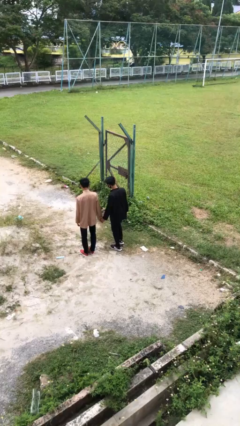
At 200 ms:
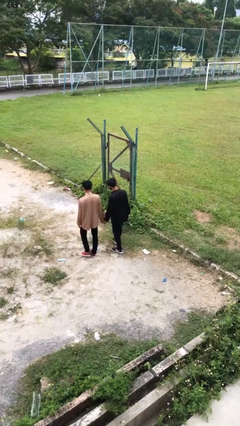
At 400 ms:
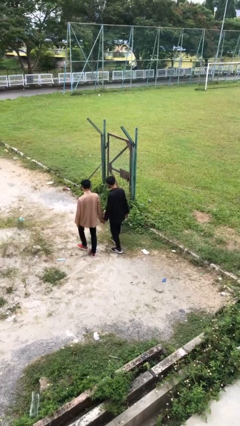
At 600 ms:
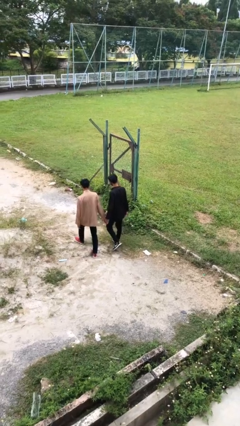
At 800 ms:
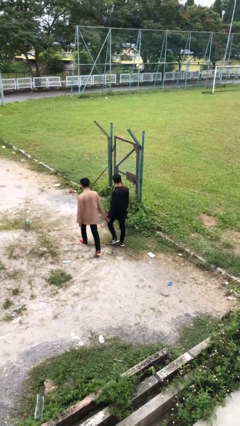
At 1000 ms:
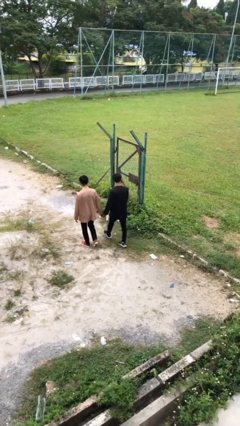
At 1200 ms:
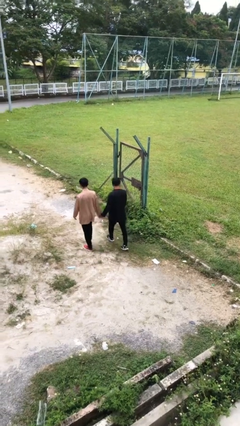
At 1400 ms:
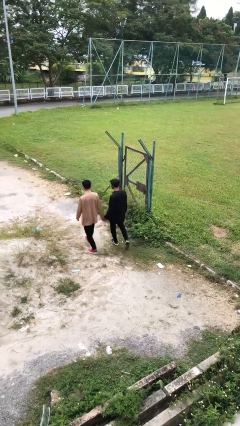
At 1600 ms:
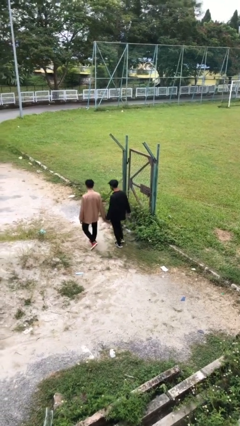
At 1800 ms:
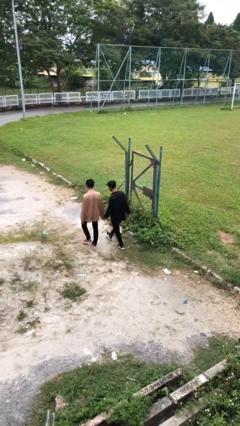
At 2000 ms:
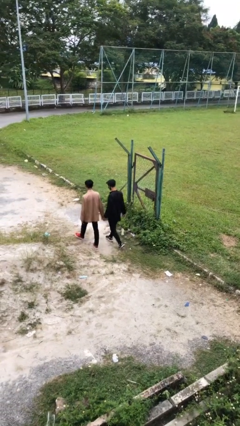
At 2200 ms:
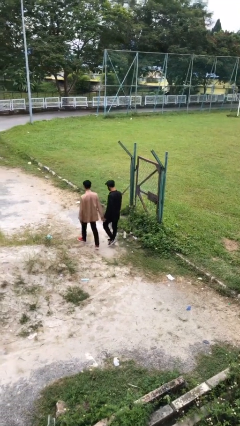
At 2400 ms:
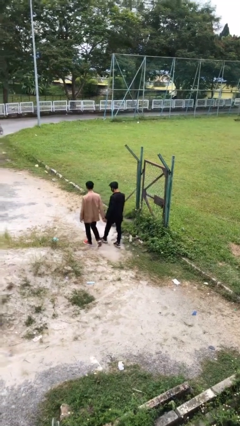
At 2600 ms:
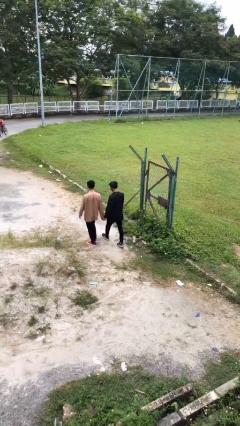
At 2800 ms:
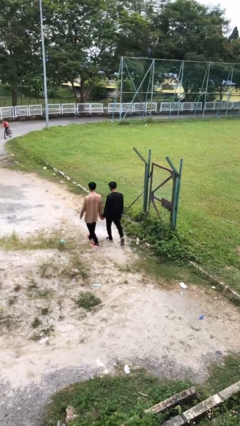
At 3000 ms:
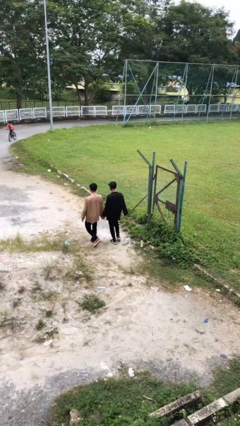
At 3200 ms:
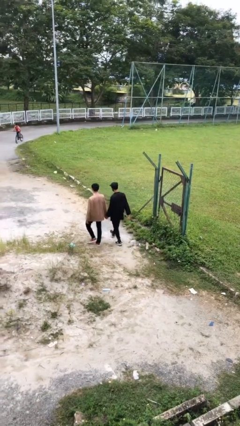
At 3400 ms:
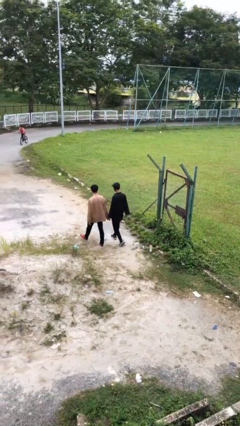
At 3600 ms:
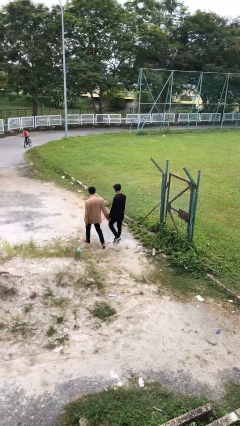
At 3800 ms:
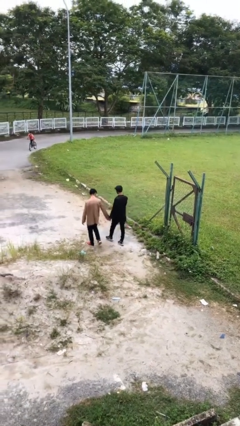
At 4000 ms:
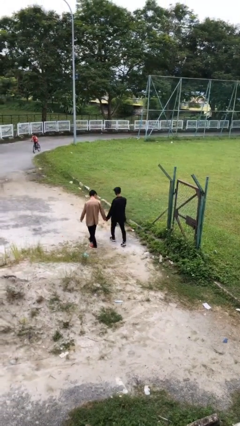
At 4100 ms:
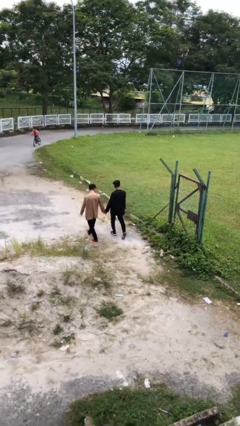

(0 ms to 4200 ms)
person talks to person

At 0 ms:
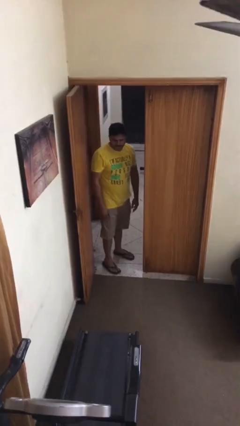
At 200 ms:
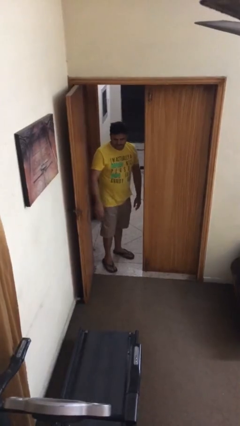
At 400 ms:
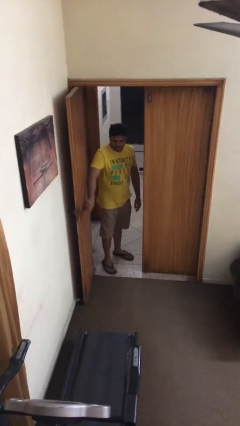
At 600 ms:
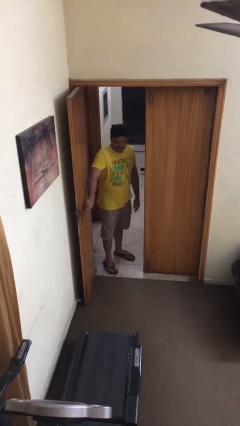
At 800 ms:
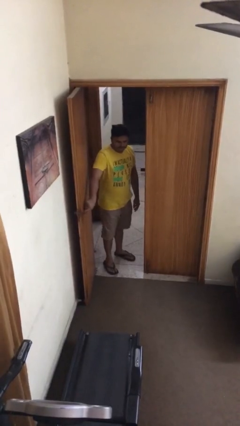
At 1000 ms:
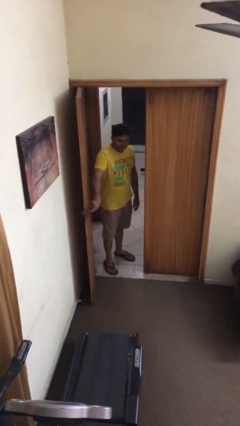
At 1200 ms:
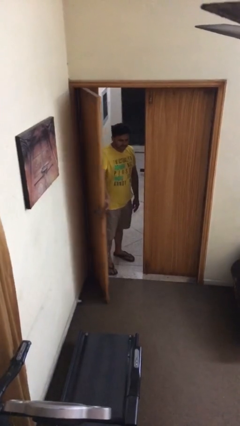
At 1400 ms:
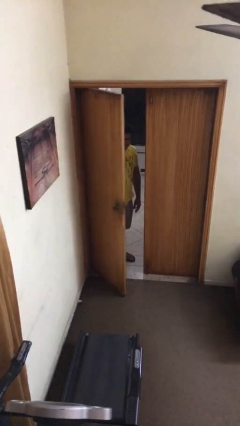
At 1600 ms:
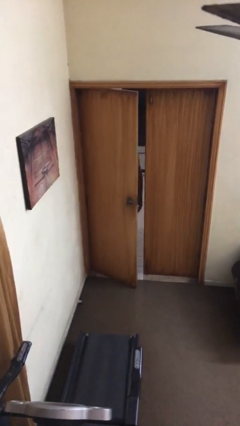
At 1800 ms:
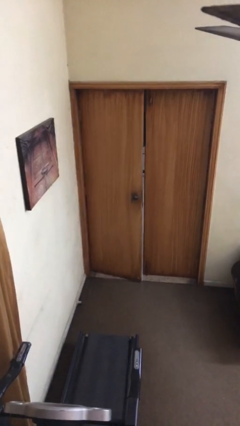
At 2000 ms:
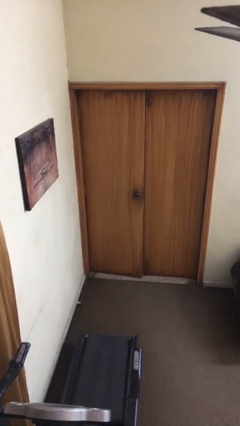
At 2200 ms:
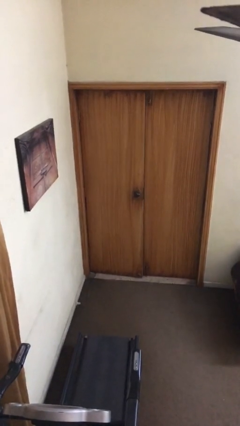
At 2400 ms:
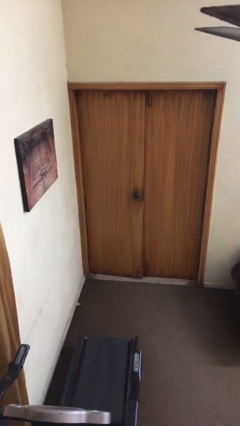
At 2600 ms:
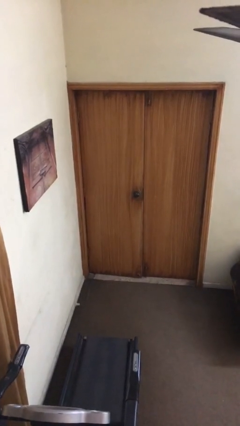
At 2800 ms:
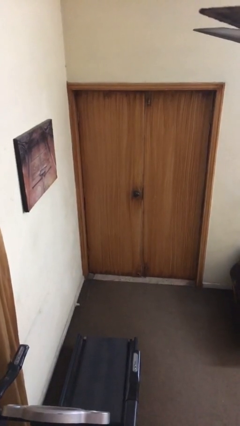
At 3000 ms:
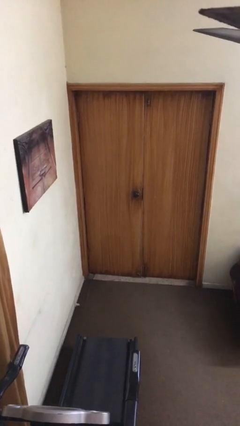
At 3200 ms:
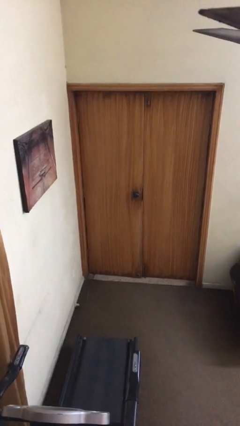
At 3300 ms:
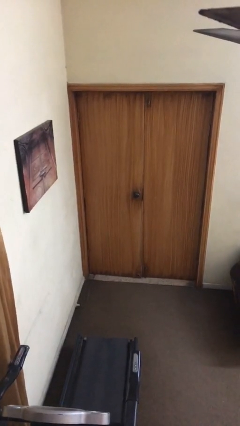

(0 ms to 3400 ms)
person closes facility door

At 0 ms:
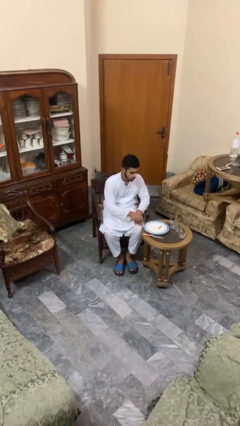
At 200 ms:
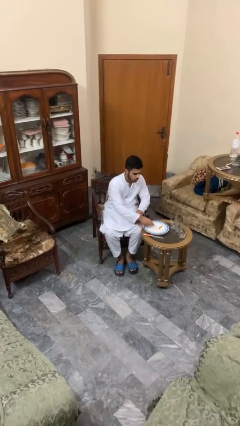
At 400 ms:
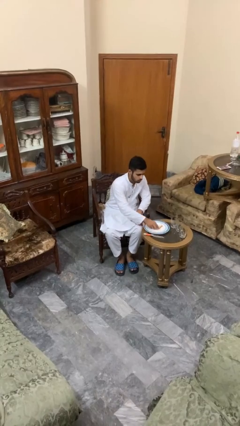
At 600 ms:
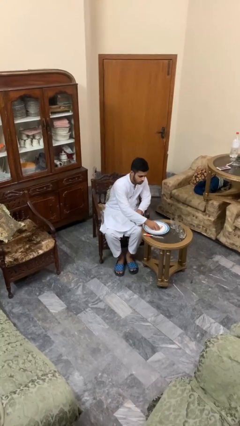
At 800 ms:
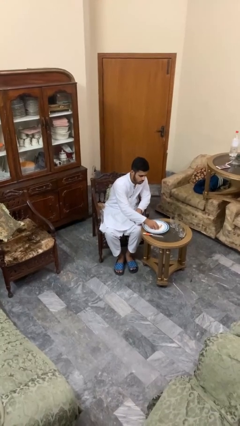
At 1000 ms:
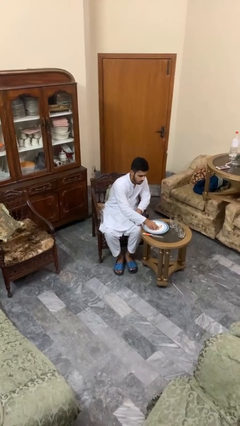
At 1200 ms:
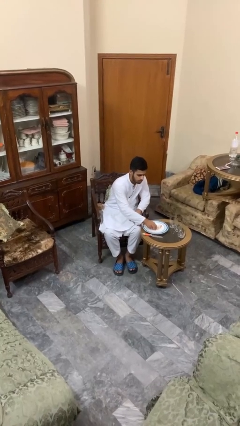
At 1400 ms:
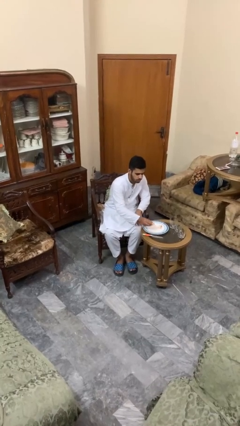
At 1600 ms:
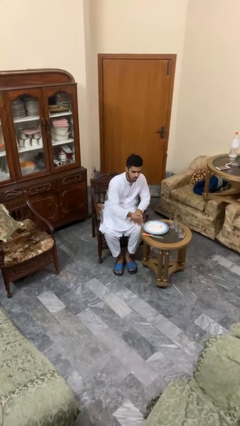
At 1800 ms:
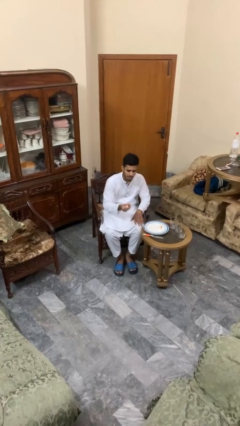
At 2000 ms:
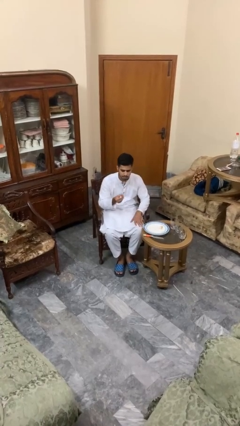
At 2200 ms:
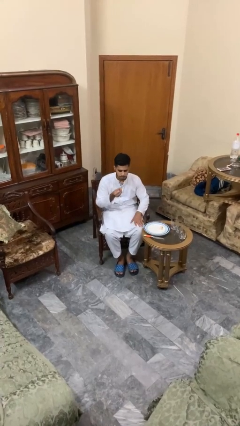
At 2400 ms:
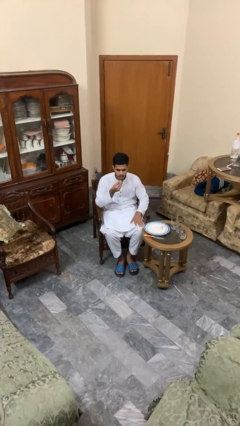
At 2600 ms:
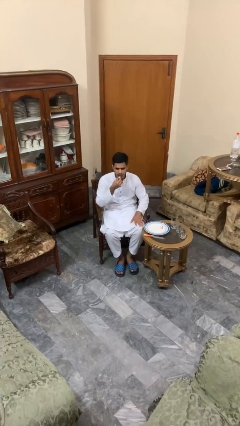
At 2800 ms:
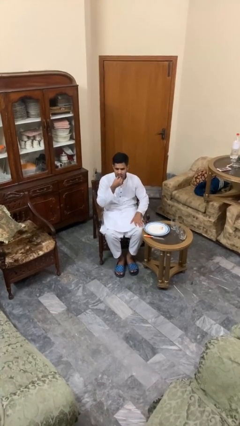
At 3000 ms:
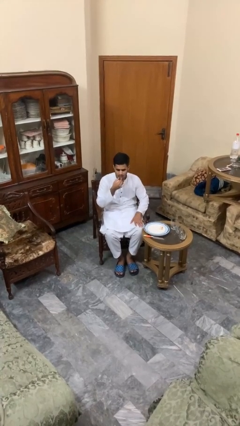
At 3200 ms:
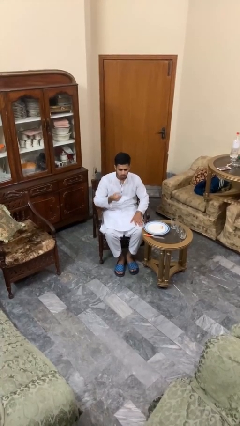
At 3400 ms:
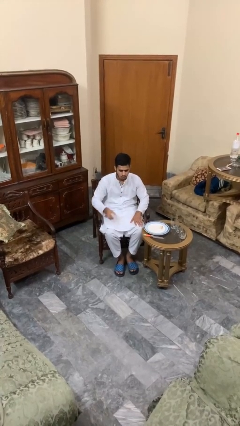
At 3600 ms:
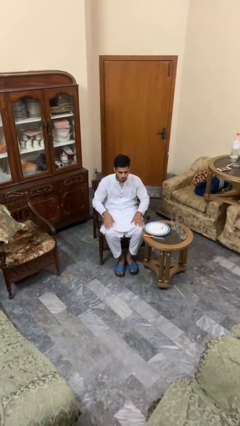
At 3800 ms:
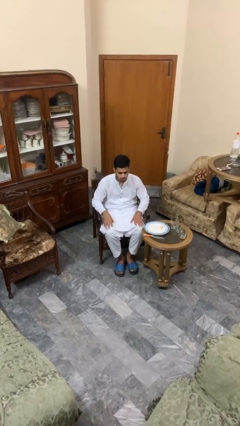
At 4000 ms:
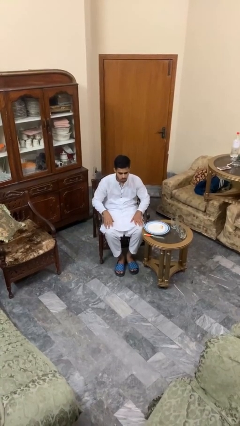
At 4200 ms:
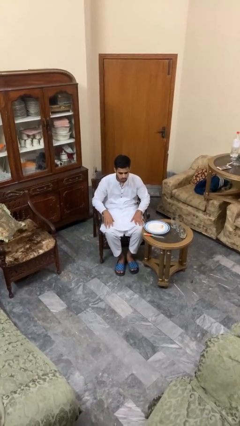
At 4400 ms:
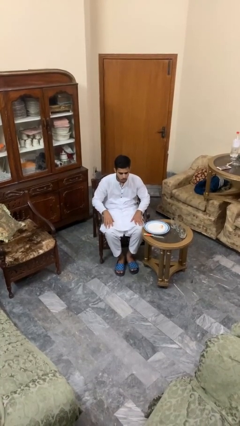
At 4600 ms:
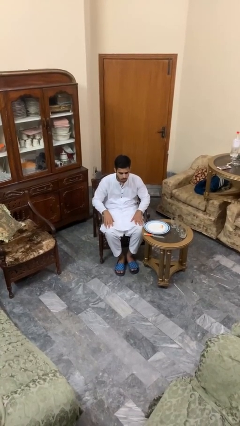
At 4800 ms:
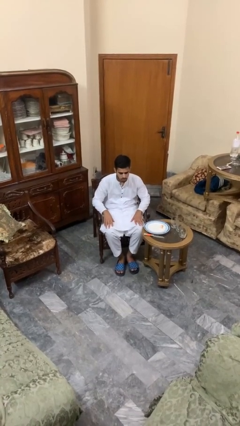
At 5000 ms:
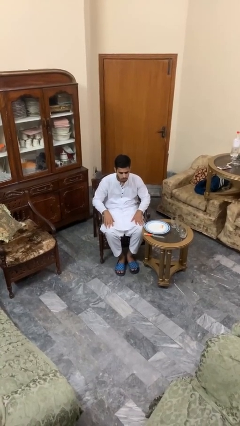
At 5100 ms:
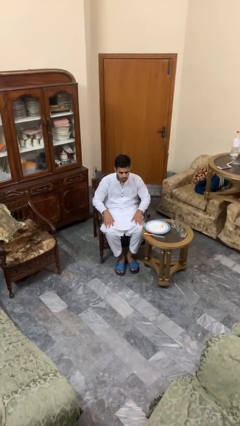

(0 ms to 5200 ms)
person eats with hands

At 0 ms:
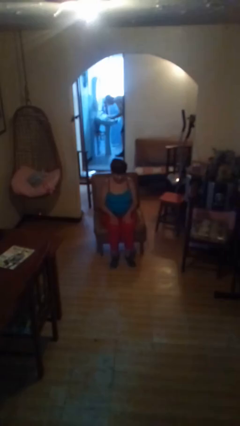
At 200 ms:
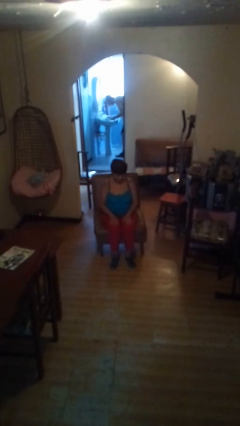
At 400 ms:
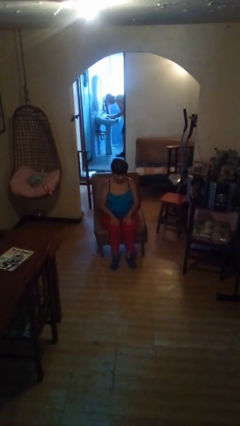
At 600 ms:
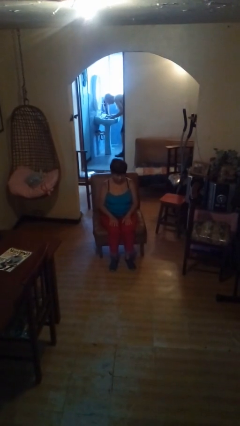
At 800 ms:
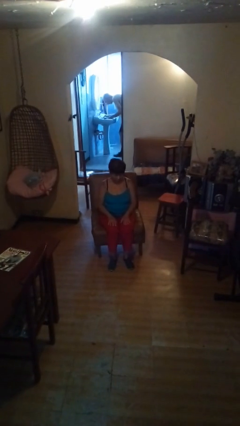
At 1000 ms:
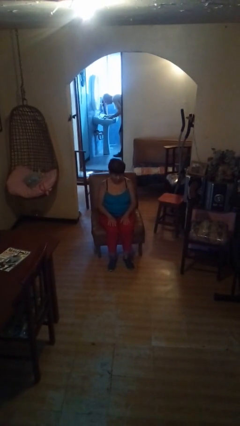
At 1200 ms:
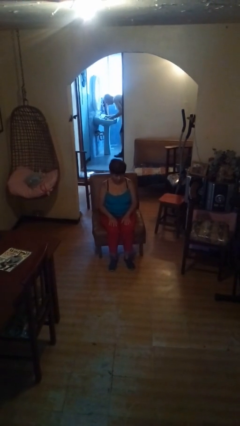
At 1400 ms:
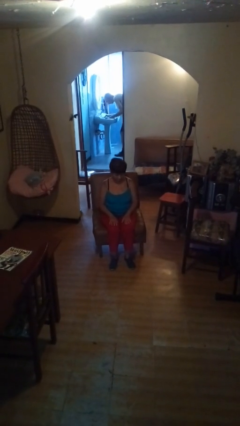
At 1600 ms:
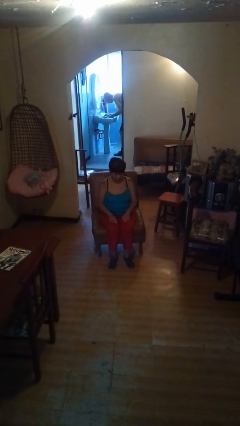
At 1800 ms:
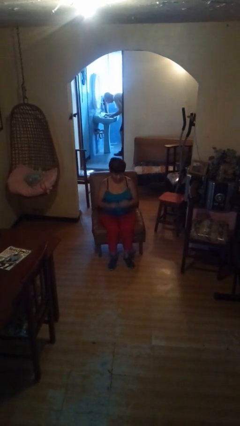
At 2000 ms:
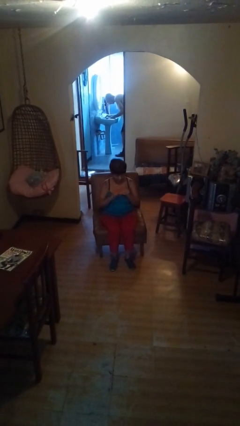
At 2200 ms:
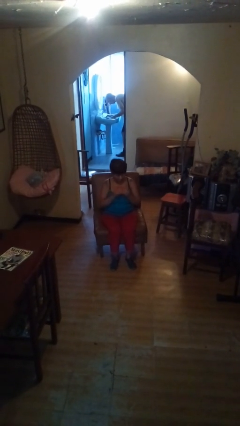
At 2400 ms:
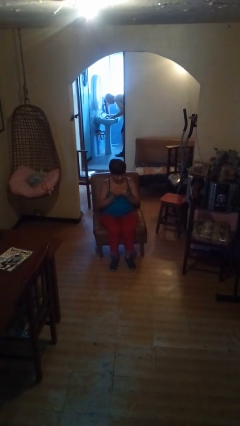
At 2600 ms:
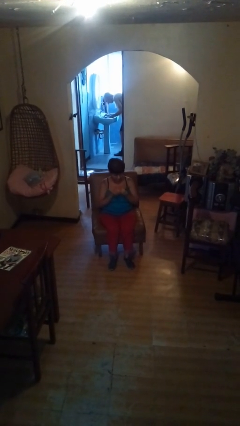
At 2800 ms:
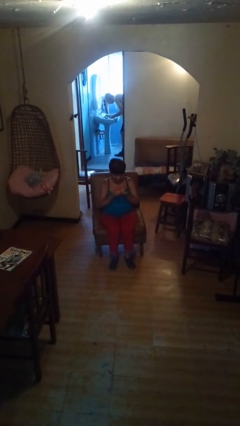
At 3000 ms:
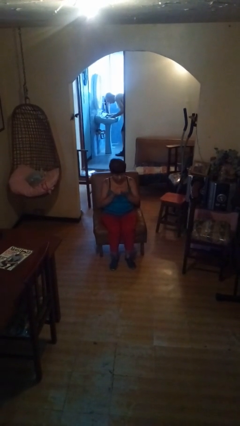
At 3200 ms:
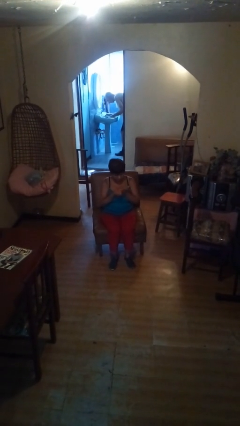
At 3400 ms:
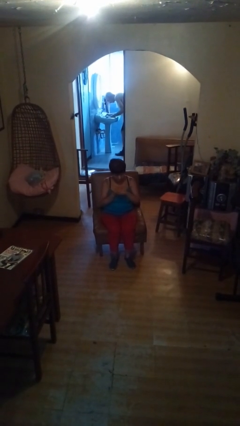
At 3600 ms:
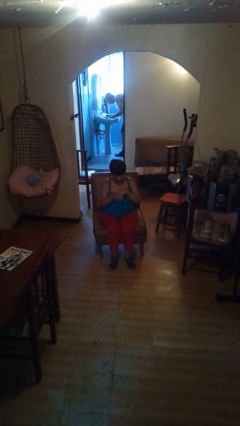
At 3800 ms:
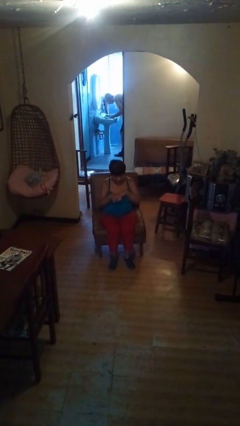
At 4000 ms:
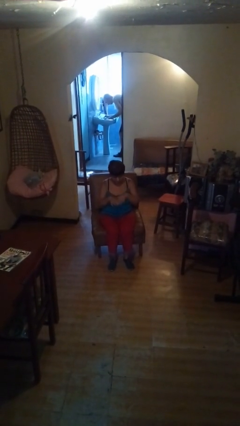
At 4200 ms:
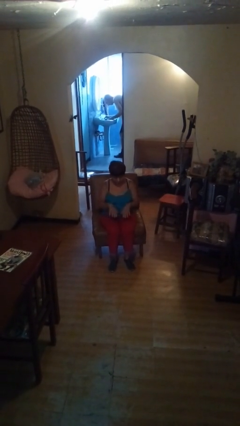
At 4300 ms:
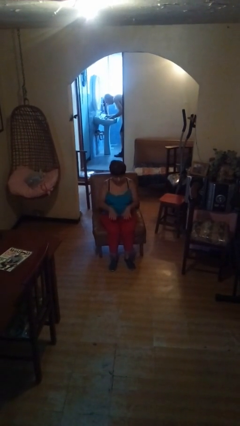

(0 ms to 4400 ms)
person looks at hands in lap

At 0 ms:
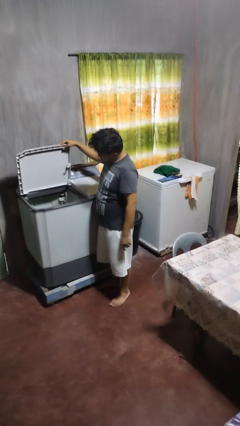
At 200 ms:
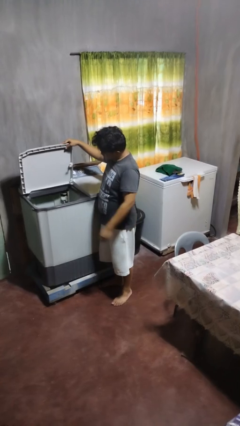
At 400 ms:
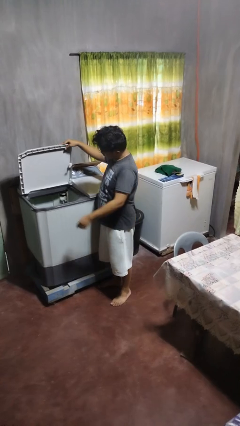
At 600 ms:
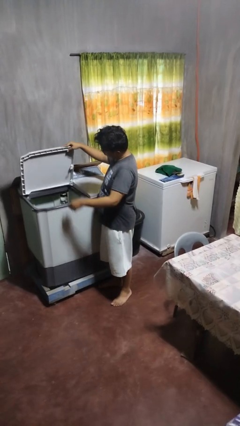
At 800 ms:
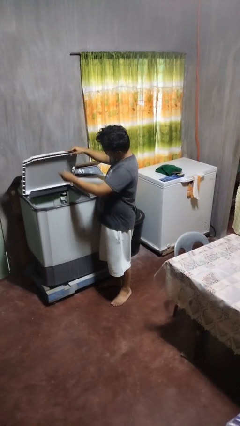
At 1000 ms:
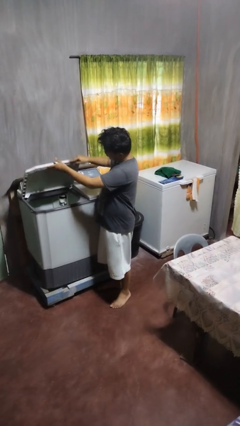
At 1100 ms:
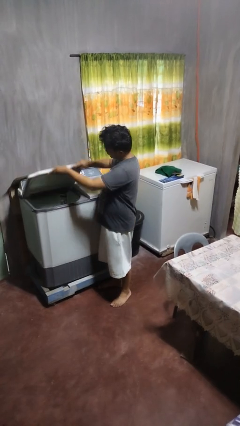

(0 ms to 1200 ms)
person closes clothes washer
